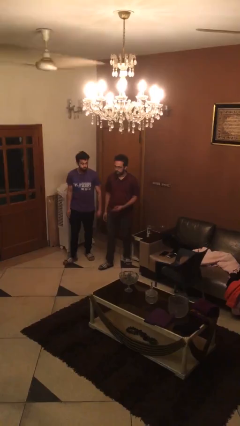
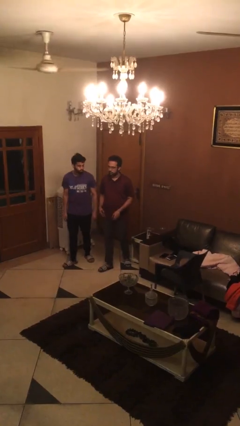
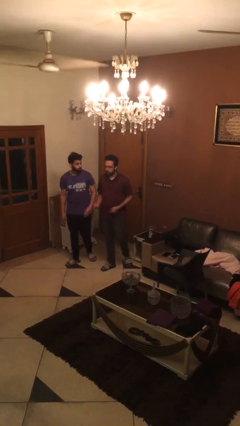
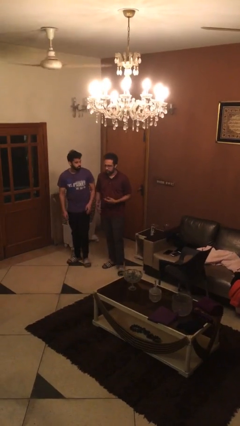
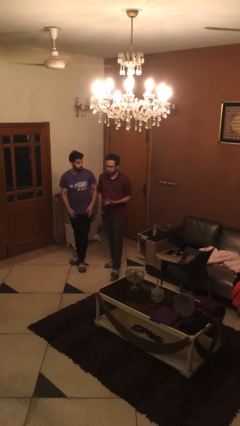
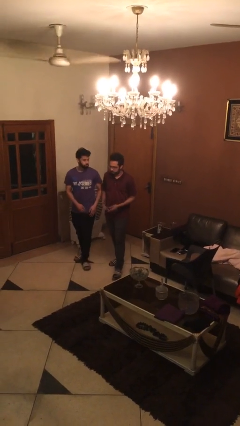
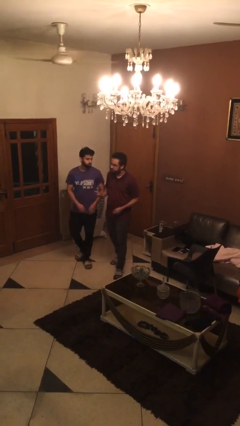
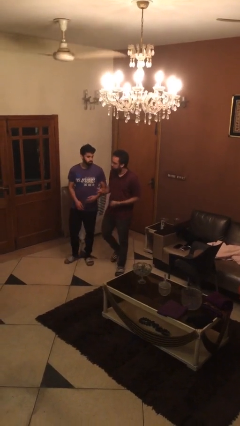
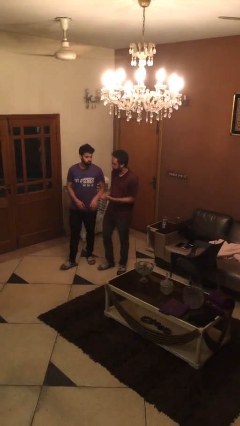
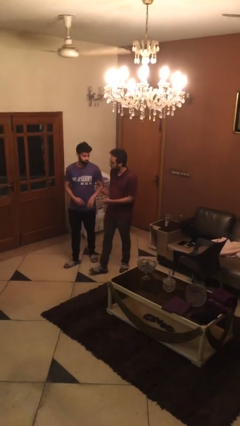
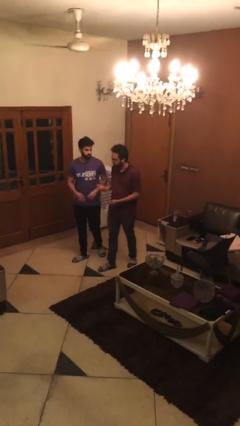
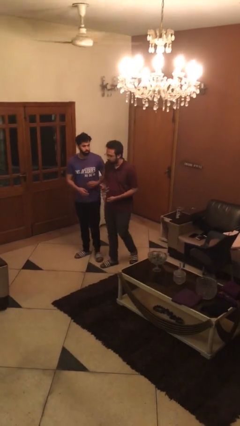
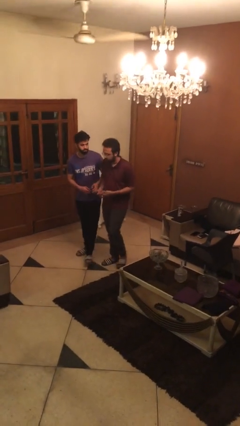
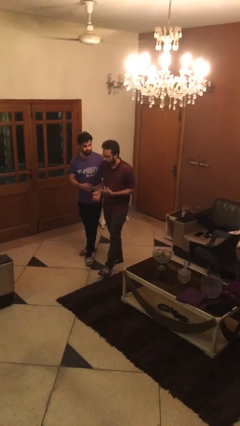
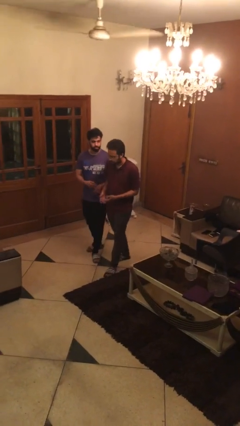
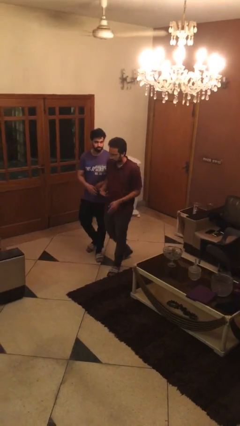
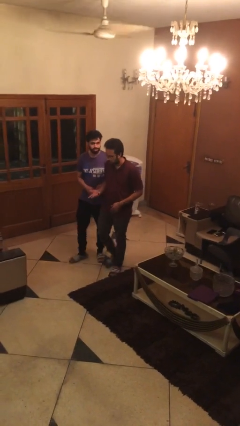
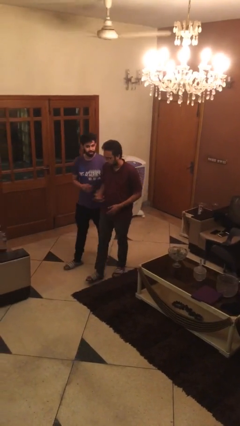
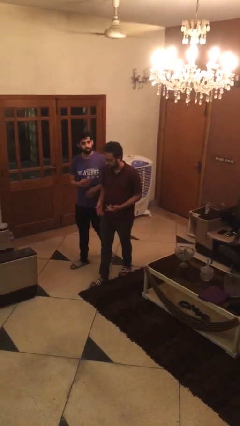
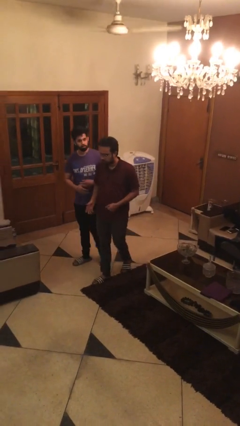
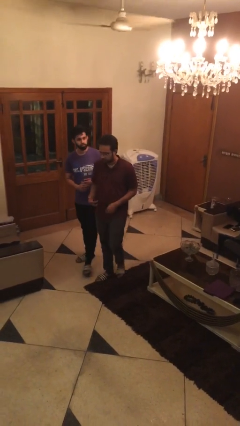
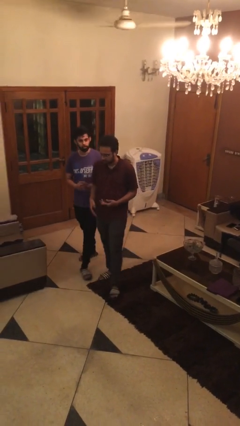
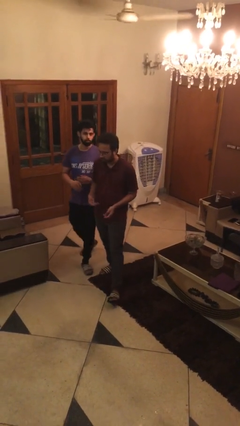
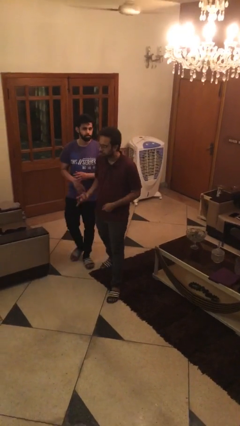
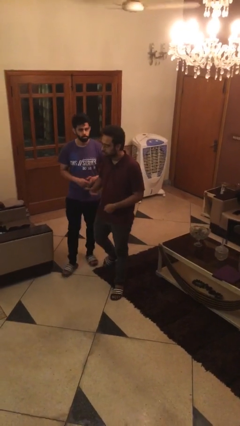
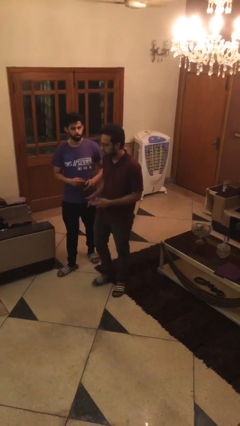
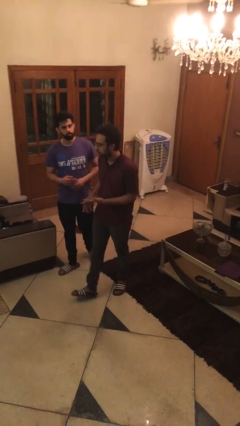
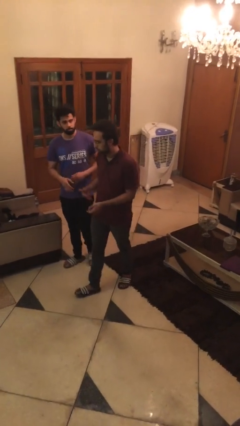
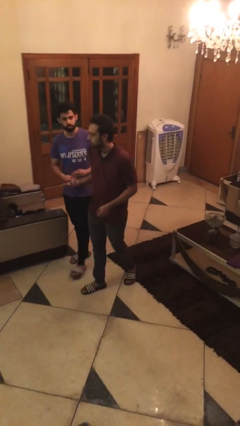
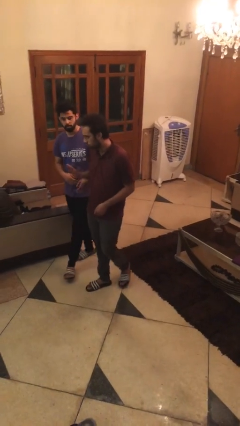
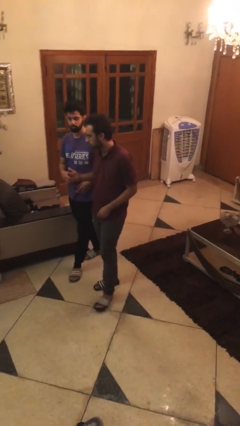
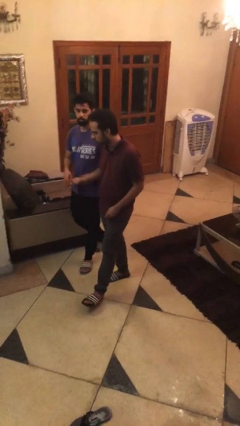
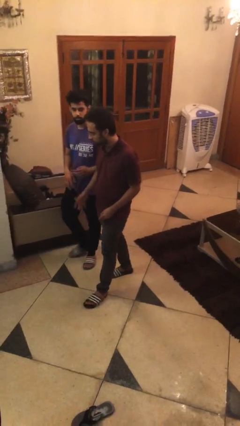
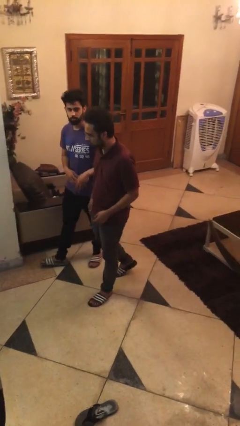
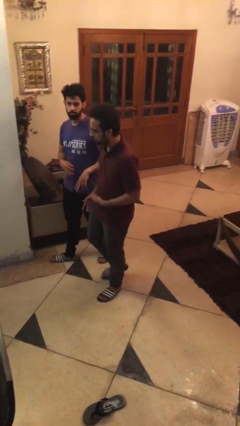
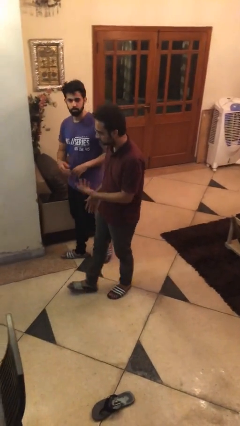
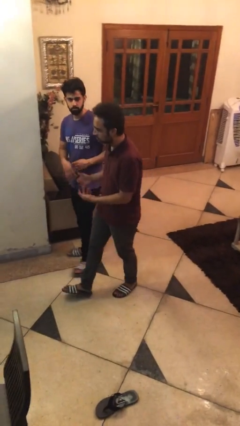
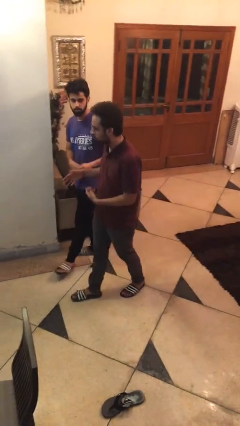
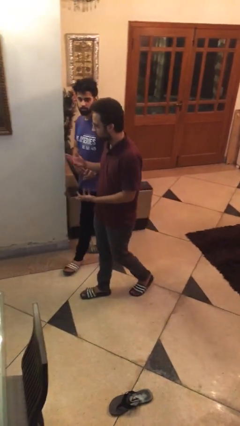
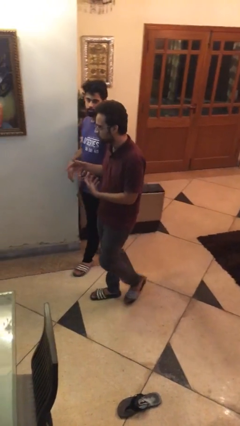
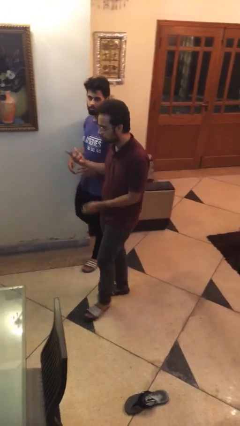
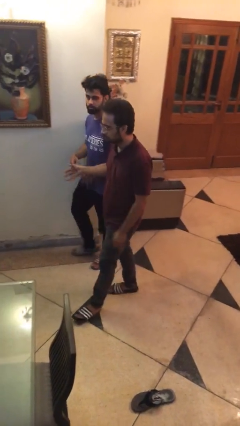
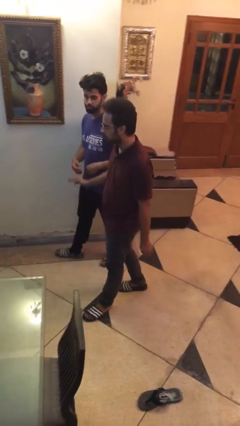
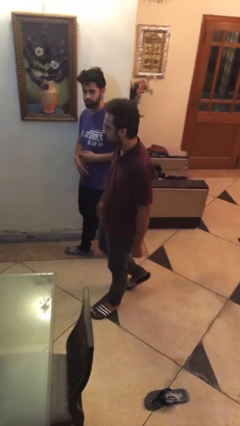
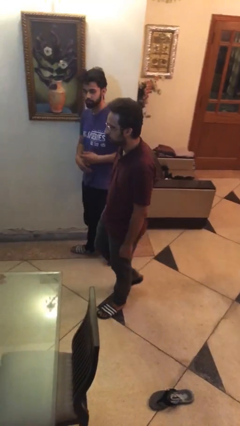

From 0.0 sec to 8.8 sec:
person talks to person

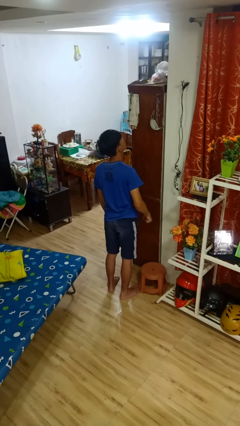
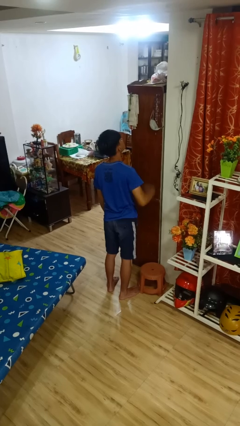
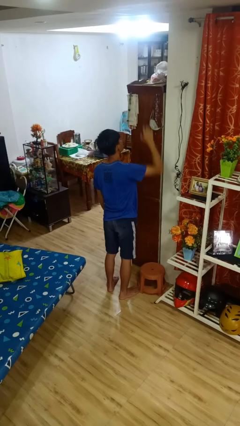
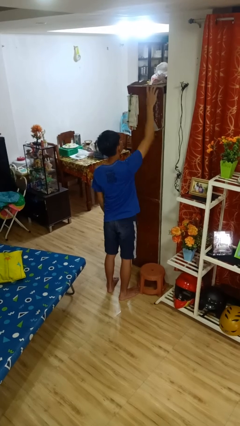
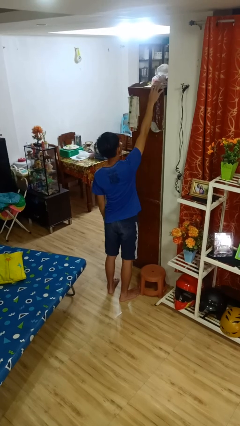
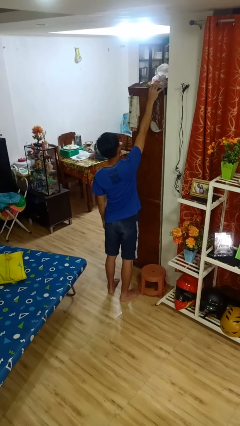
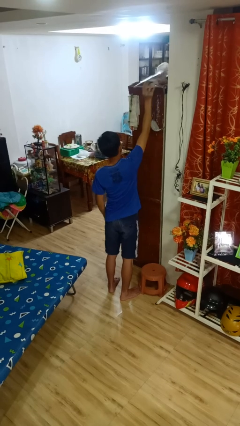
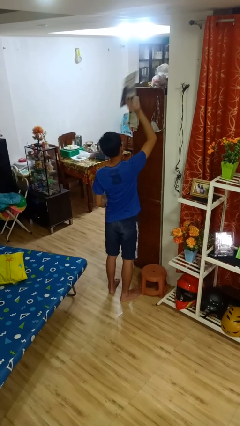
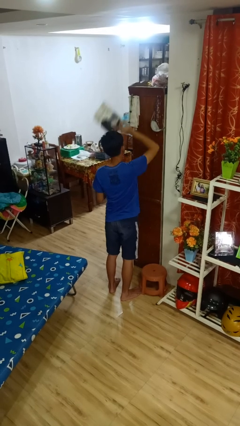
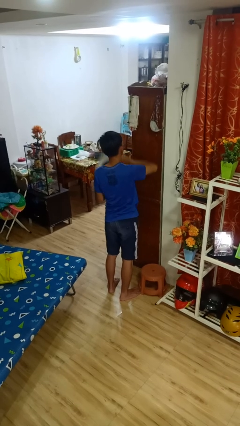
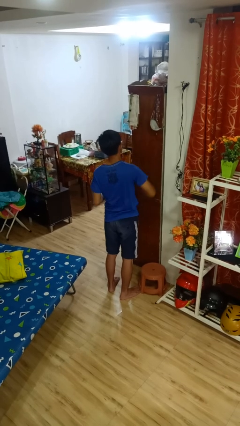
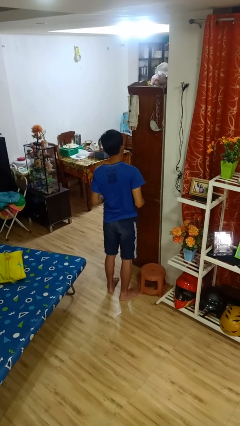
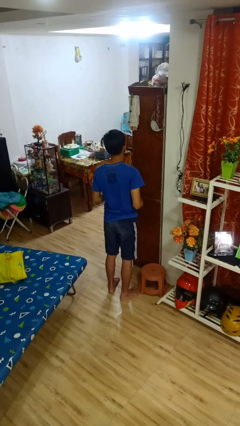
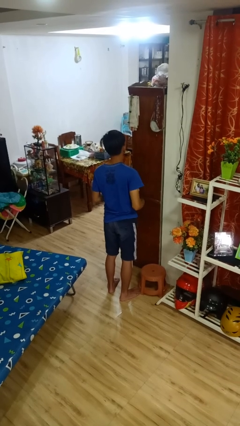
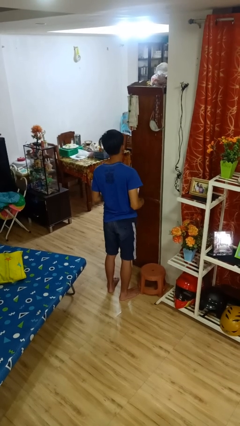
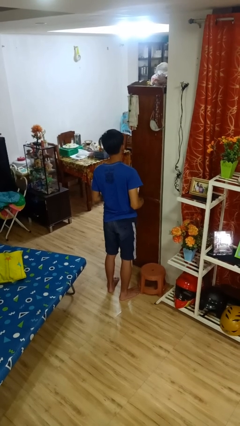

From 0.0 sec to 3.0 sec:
person picks up object from shelf

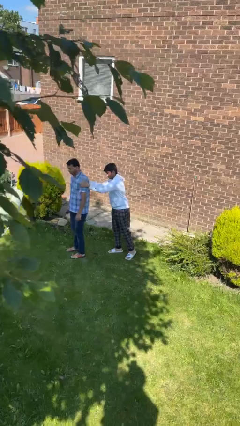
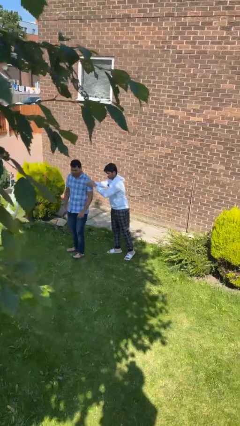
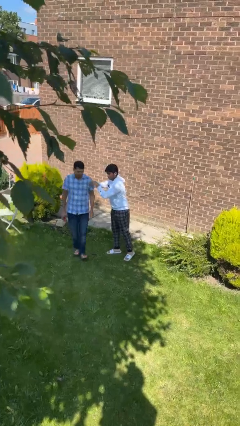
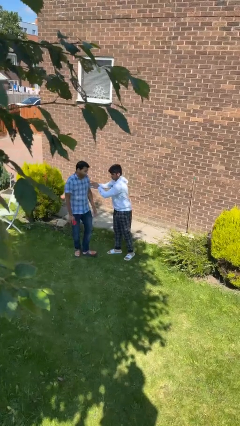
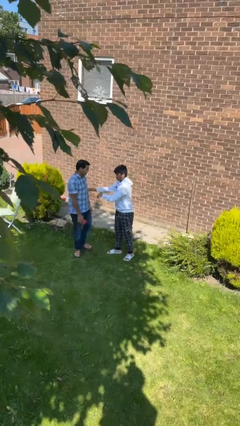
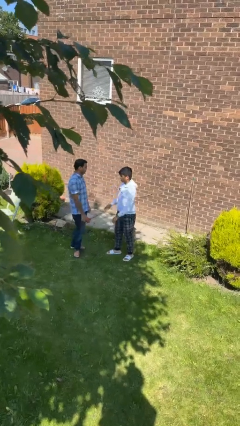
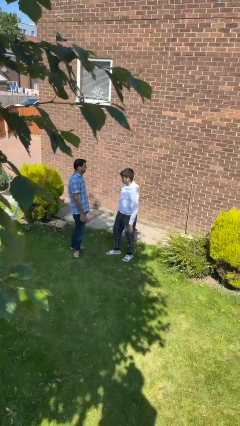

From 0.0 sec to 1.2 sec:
person spins person around

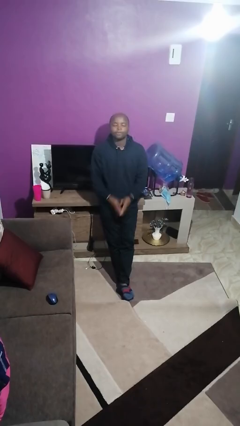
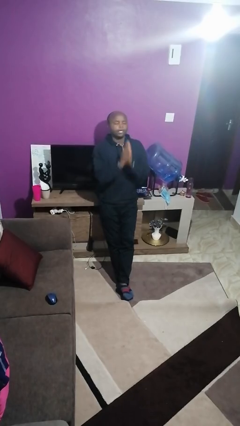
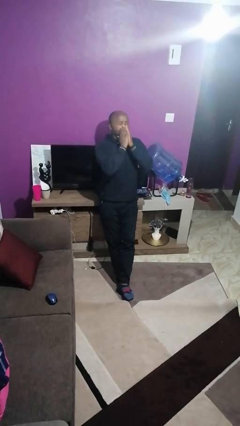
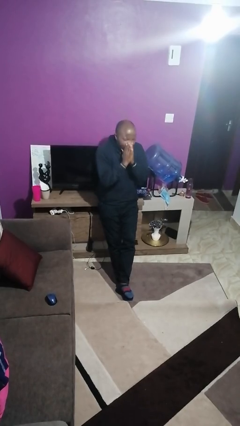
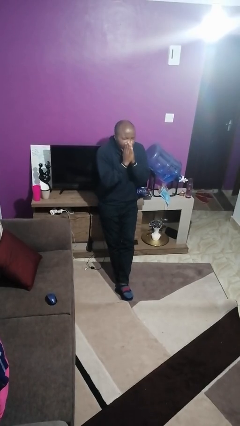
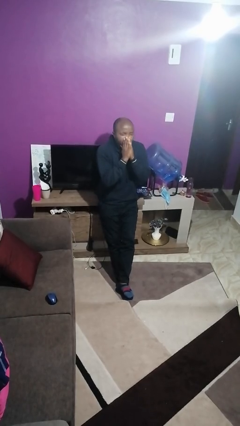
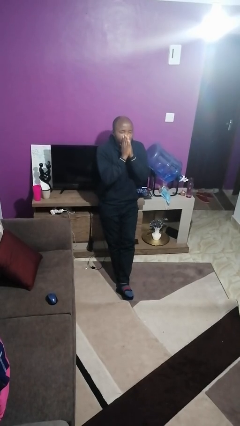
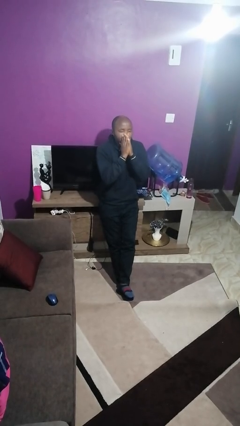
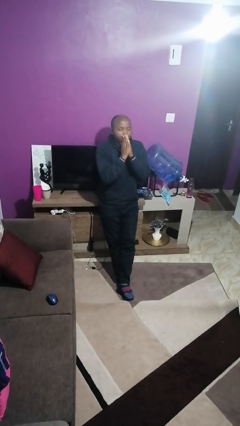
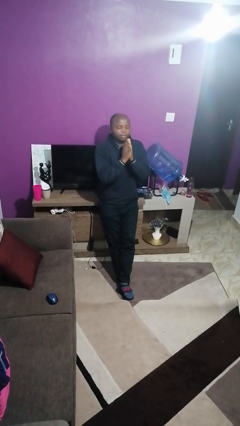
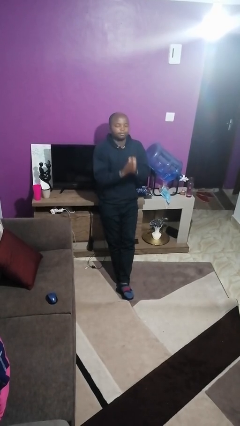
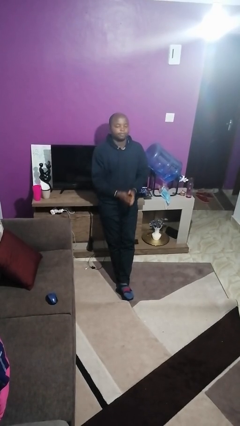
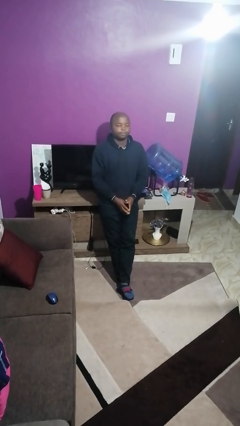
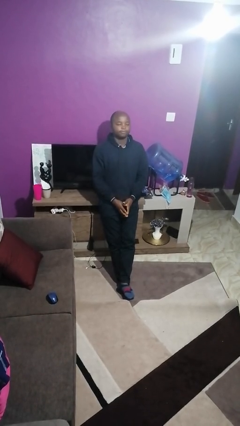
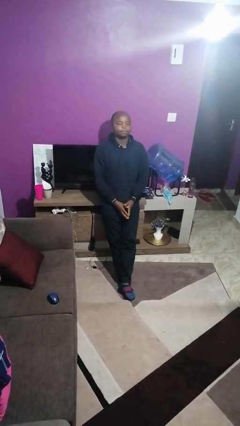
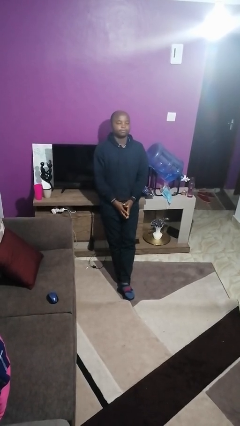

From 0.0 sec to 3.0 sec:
person sneezes into hand

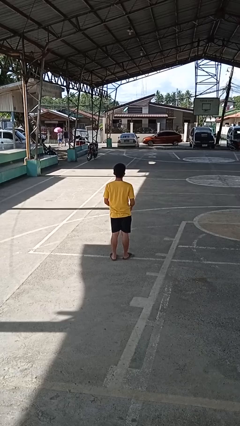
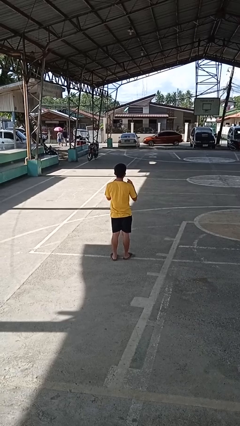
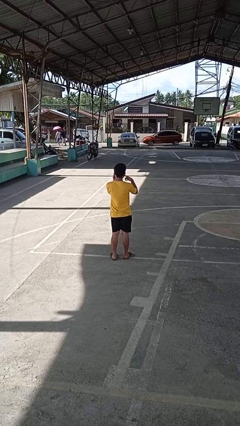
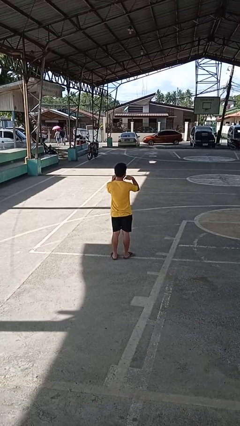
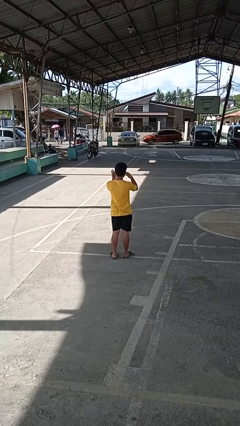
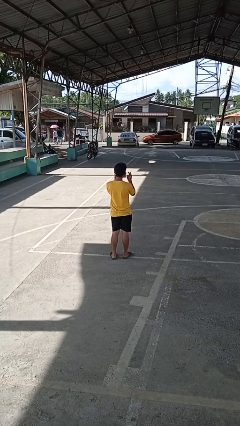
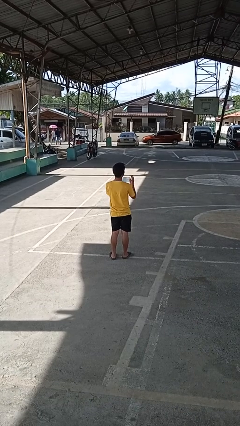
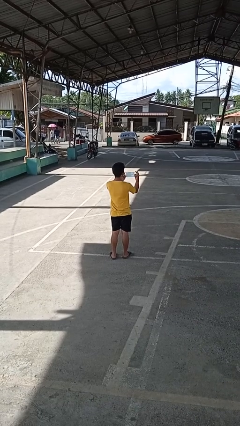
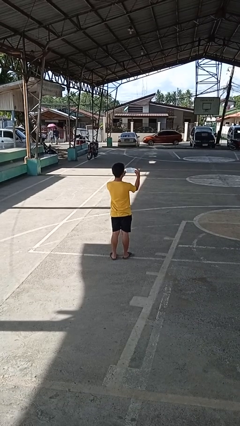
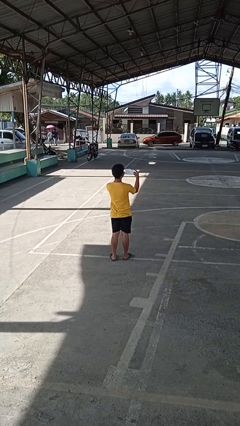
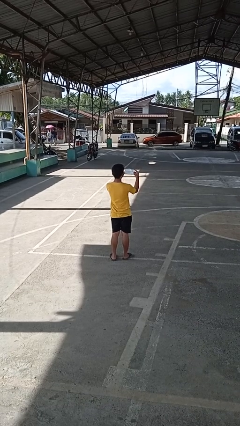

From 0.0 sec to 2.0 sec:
person takes off facemask
